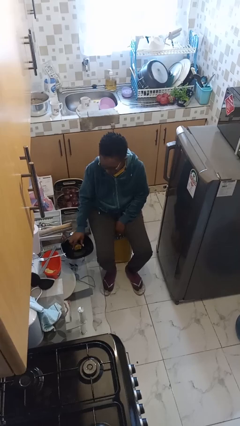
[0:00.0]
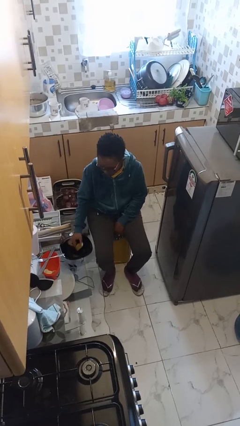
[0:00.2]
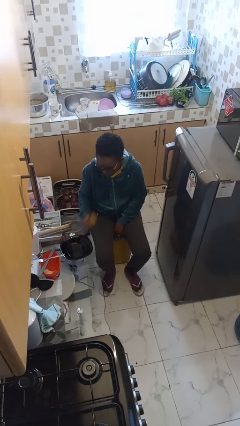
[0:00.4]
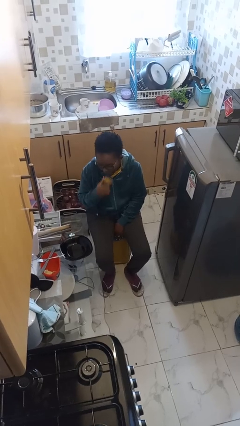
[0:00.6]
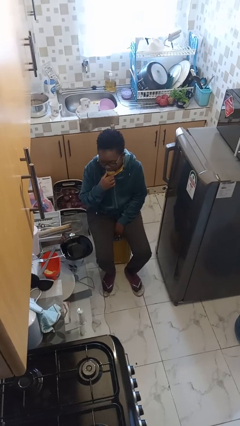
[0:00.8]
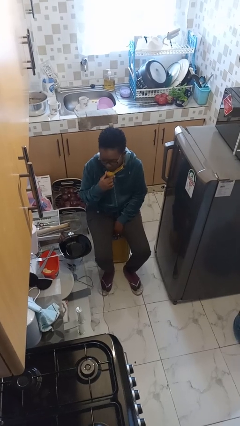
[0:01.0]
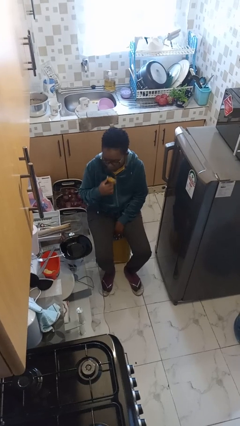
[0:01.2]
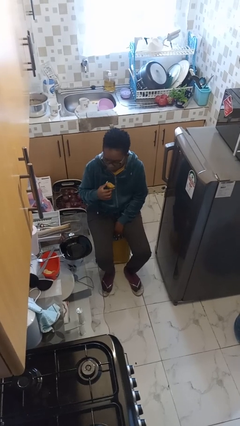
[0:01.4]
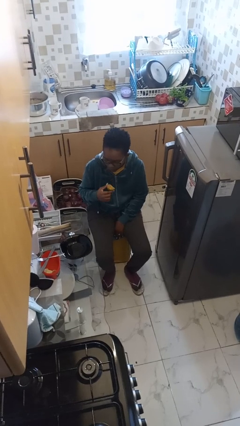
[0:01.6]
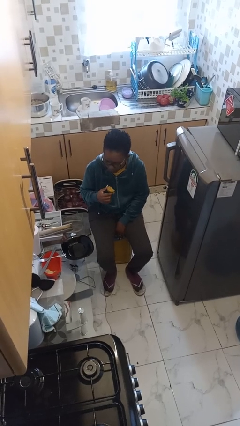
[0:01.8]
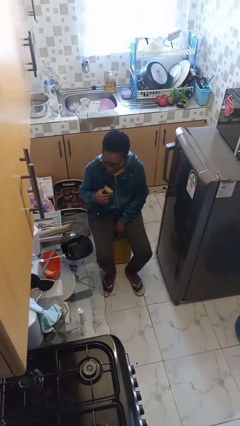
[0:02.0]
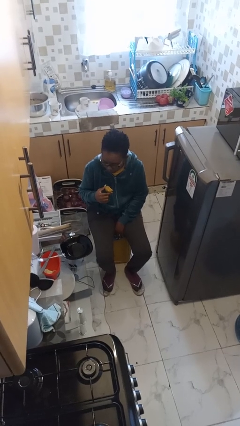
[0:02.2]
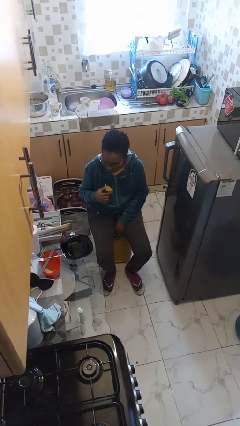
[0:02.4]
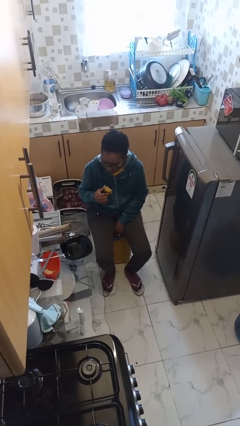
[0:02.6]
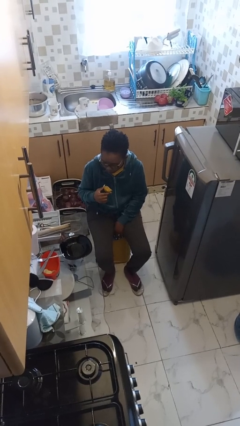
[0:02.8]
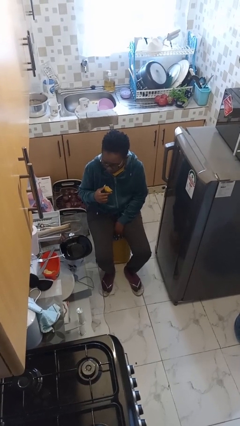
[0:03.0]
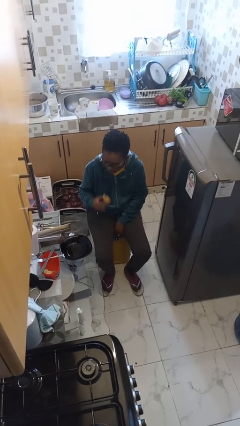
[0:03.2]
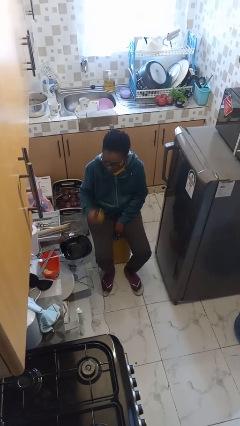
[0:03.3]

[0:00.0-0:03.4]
person eats with hands

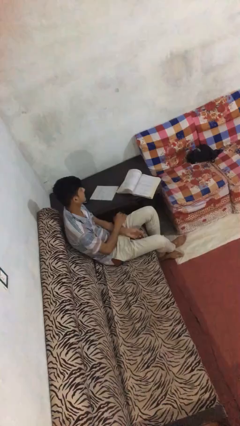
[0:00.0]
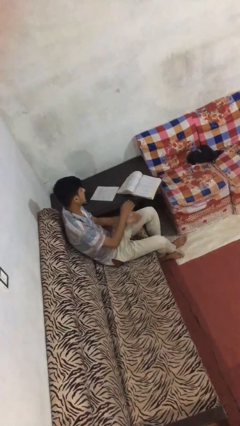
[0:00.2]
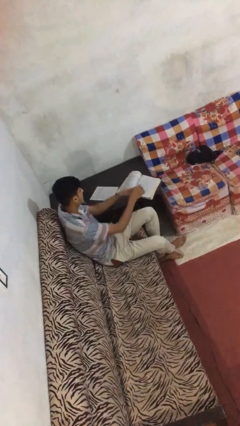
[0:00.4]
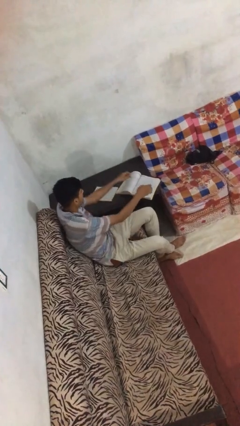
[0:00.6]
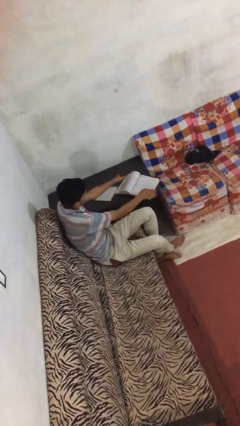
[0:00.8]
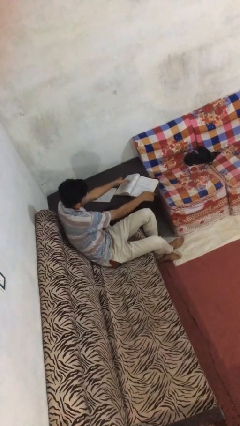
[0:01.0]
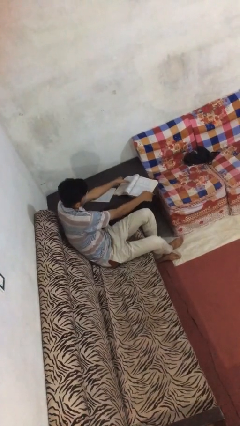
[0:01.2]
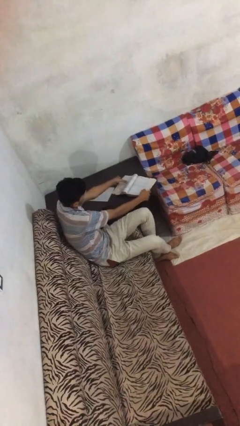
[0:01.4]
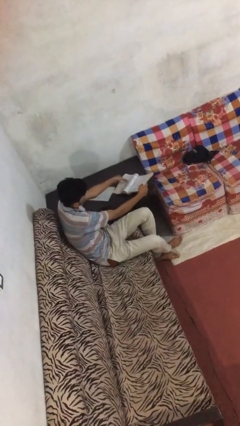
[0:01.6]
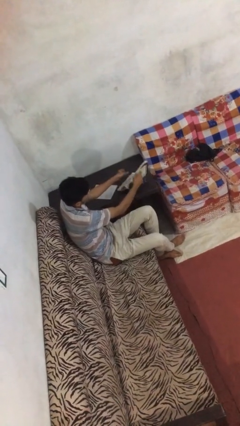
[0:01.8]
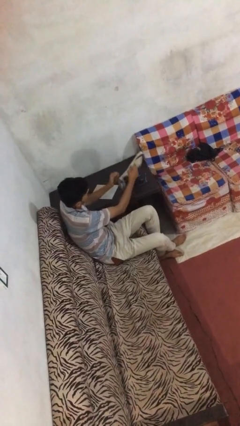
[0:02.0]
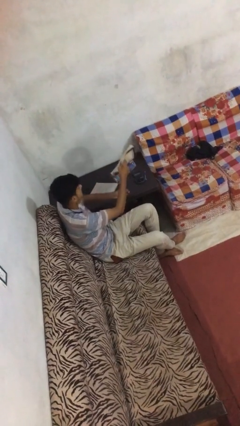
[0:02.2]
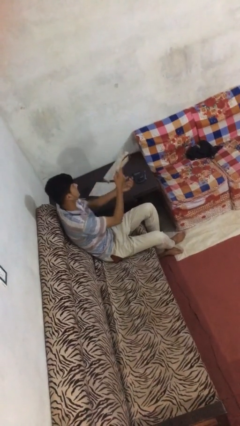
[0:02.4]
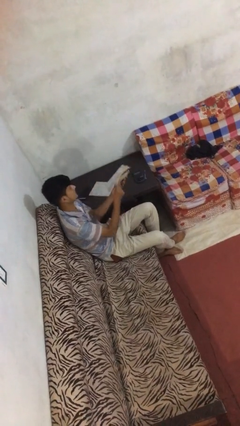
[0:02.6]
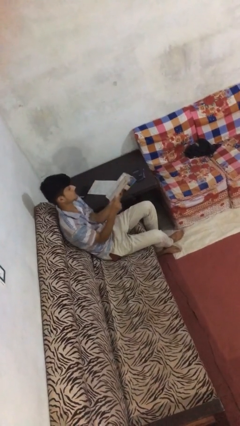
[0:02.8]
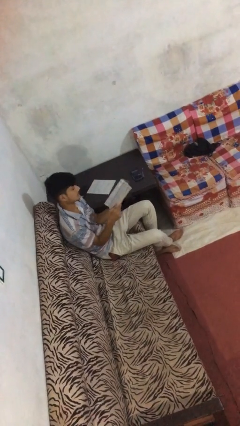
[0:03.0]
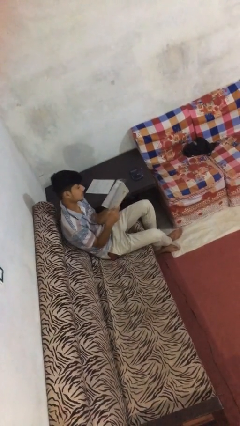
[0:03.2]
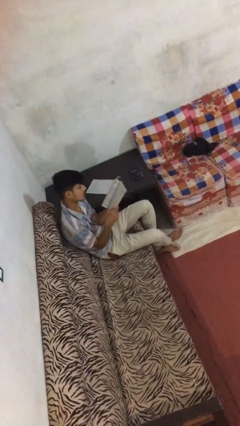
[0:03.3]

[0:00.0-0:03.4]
person picks up object from table

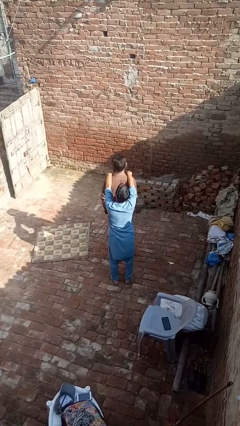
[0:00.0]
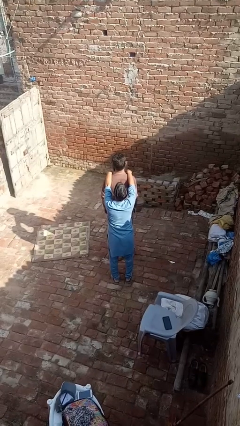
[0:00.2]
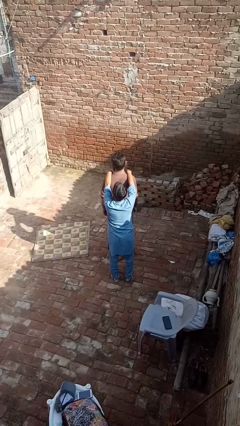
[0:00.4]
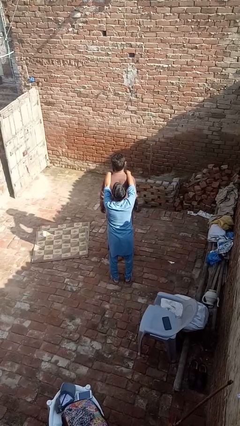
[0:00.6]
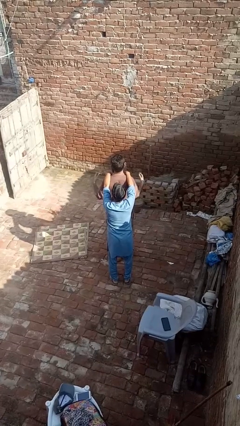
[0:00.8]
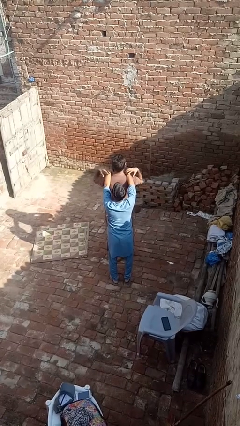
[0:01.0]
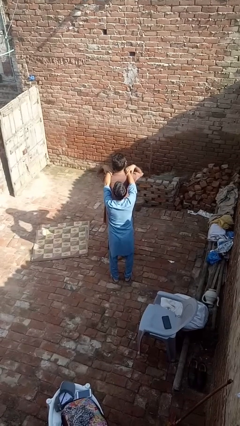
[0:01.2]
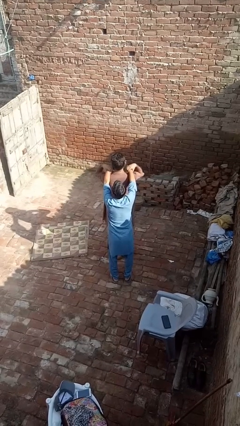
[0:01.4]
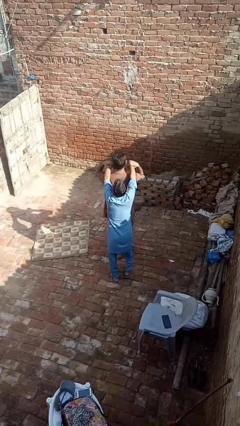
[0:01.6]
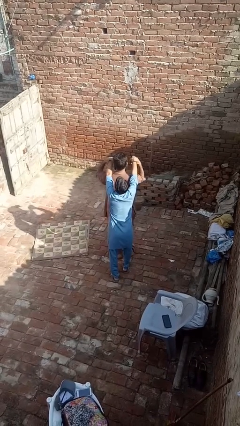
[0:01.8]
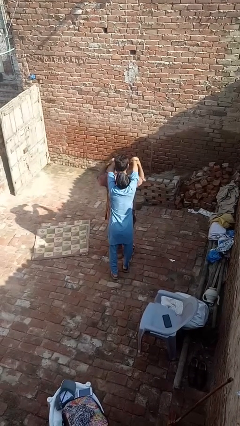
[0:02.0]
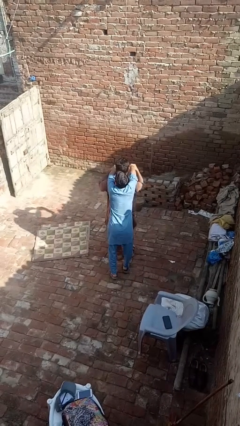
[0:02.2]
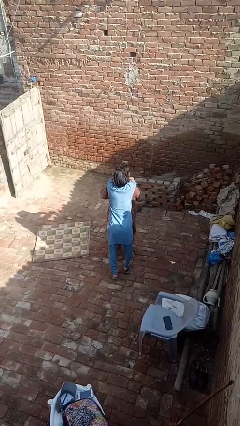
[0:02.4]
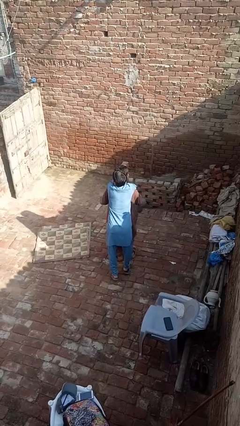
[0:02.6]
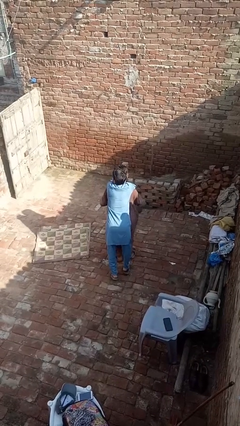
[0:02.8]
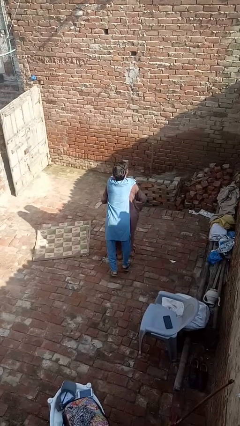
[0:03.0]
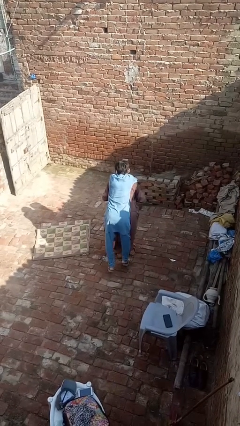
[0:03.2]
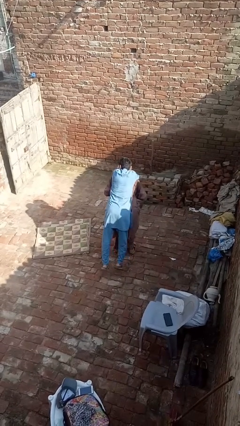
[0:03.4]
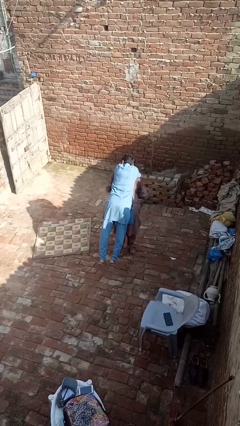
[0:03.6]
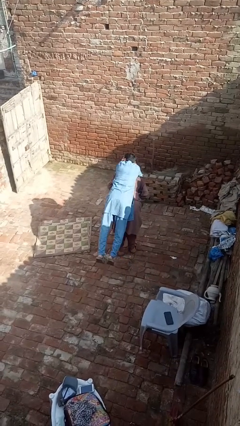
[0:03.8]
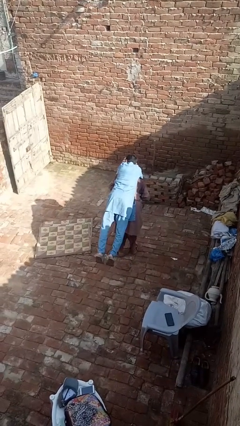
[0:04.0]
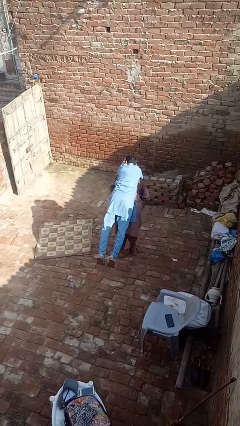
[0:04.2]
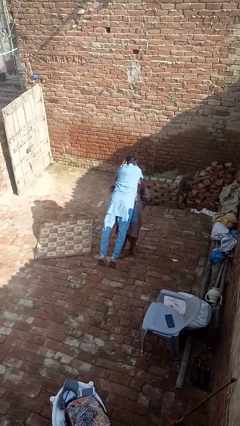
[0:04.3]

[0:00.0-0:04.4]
person carries person over shoulder

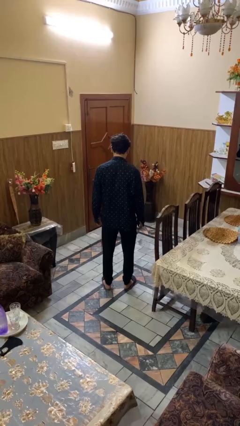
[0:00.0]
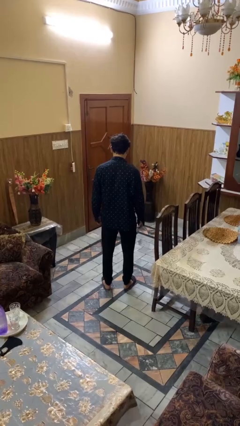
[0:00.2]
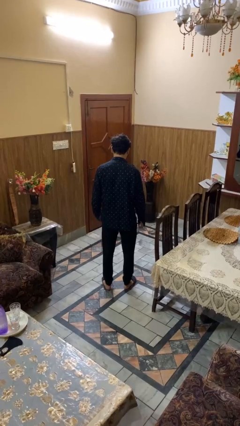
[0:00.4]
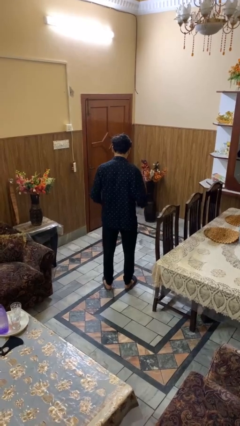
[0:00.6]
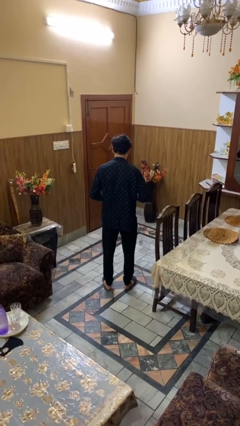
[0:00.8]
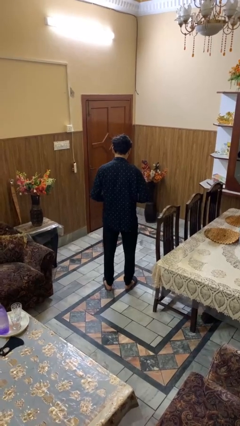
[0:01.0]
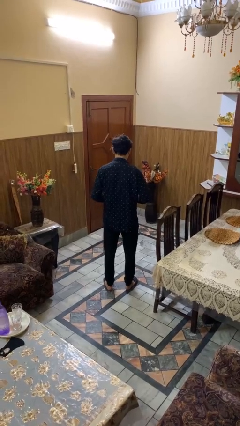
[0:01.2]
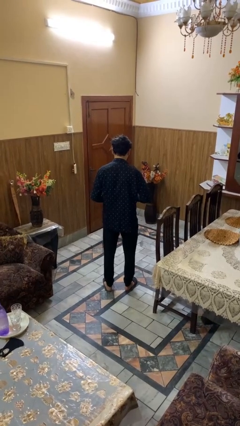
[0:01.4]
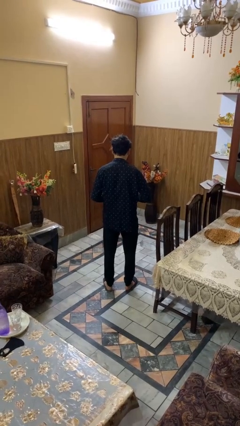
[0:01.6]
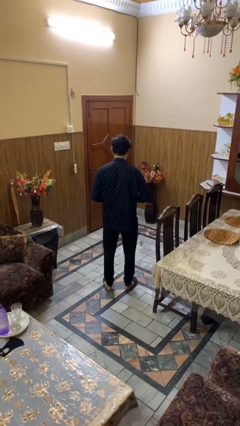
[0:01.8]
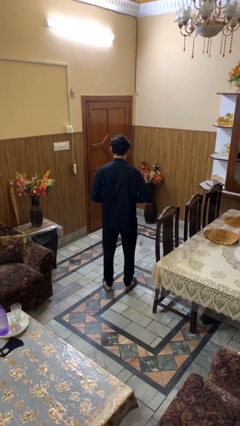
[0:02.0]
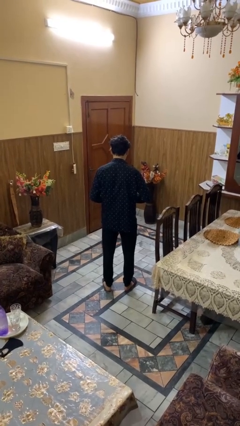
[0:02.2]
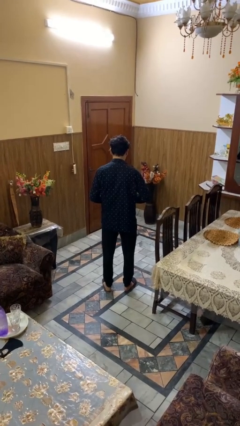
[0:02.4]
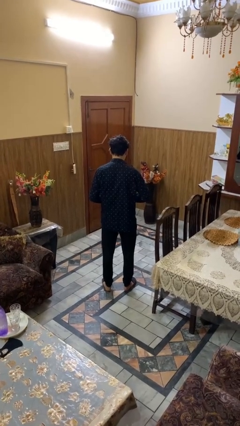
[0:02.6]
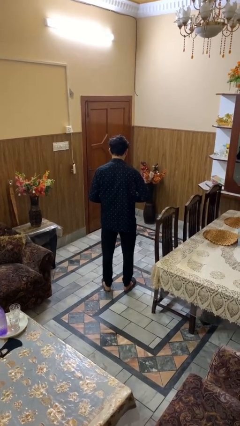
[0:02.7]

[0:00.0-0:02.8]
person buttons shirt

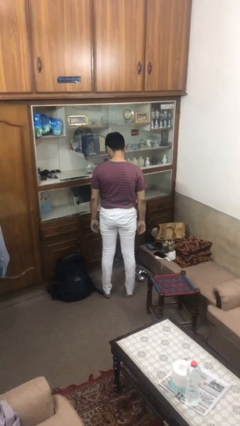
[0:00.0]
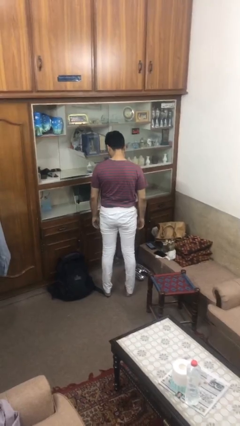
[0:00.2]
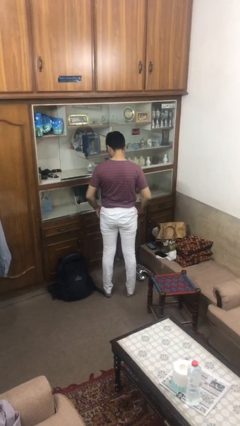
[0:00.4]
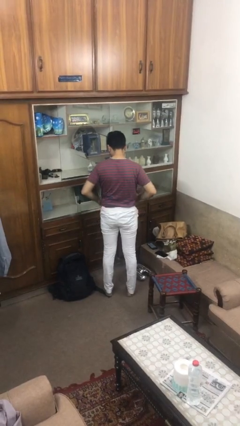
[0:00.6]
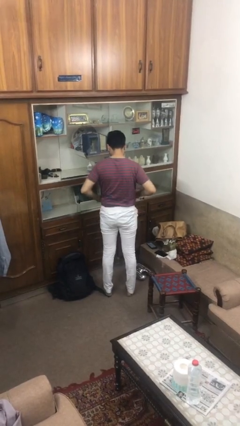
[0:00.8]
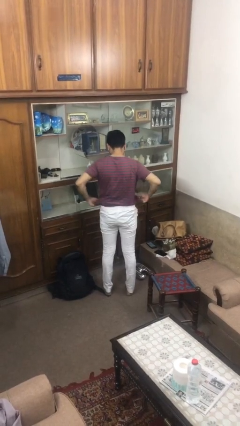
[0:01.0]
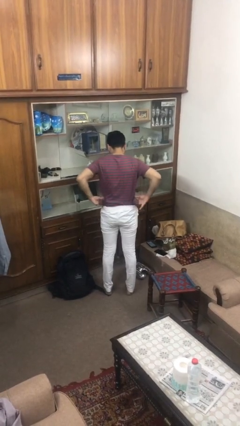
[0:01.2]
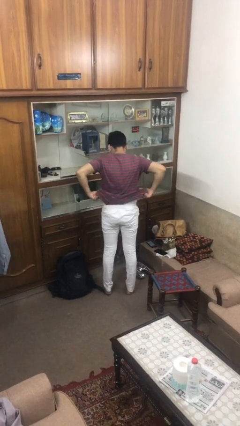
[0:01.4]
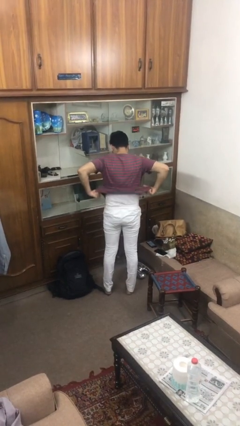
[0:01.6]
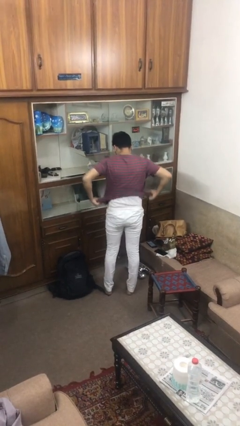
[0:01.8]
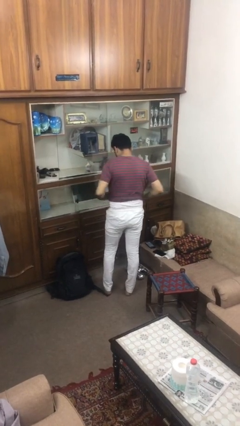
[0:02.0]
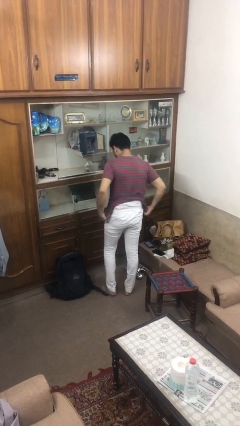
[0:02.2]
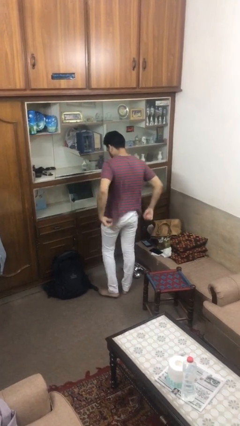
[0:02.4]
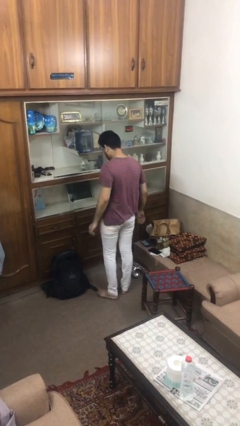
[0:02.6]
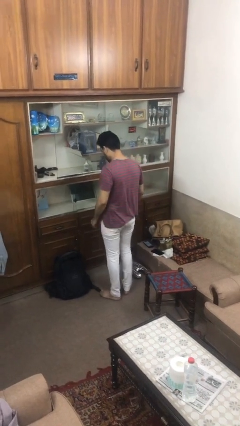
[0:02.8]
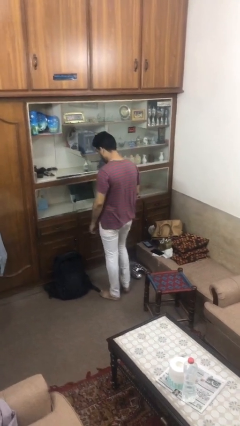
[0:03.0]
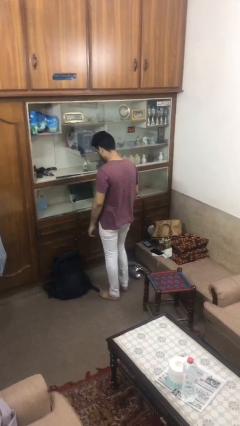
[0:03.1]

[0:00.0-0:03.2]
person untucks shirt

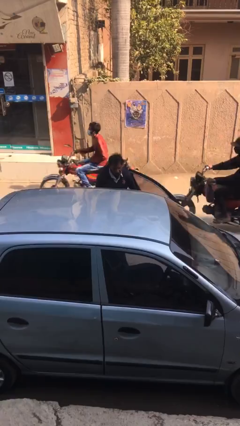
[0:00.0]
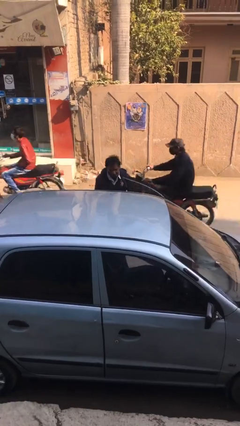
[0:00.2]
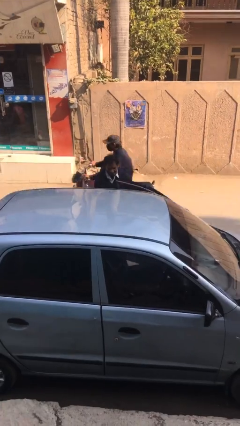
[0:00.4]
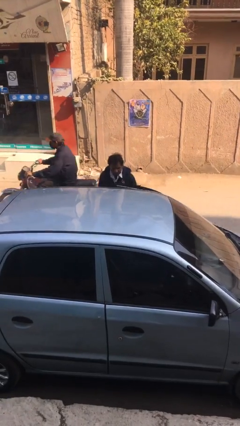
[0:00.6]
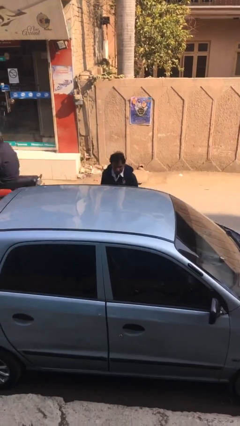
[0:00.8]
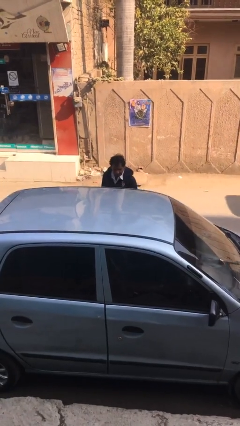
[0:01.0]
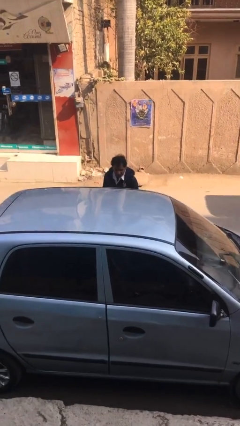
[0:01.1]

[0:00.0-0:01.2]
person closes car door
